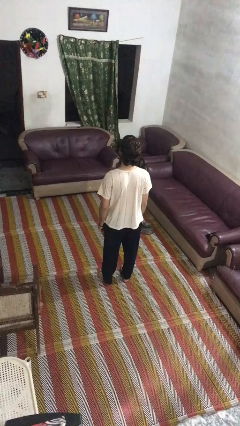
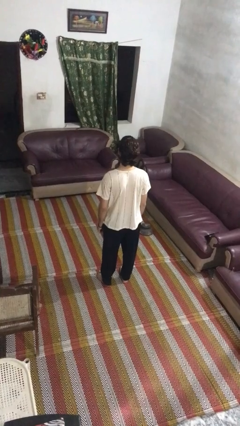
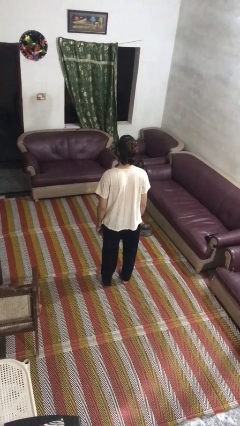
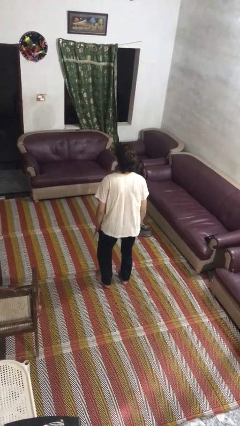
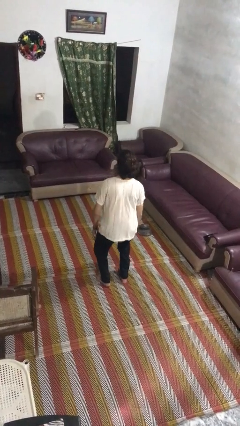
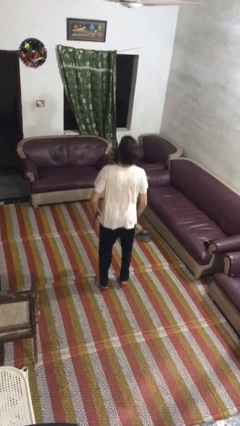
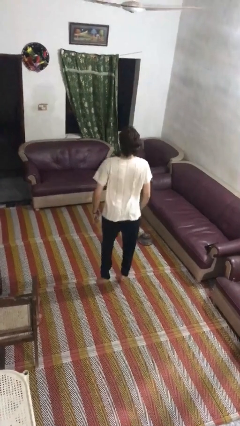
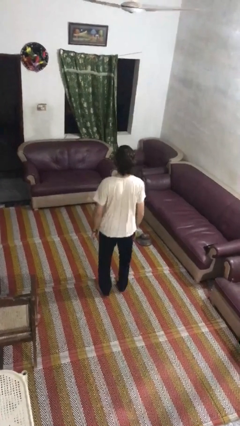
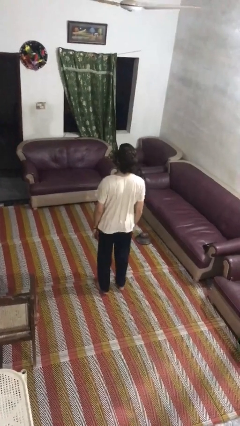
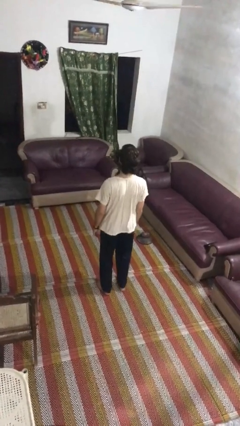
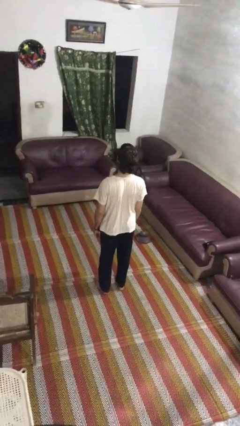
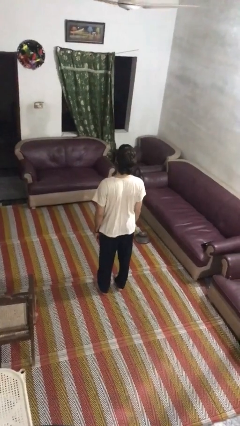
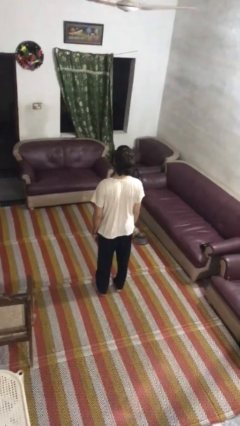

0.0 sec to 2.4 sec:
person jumps

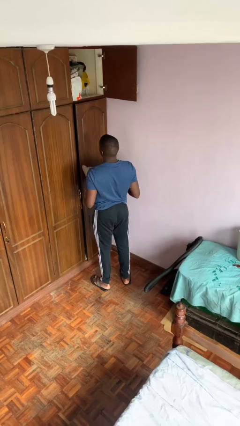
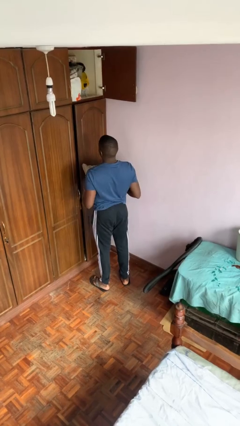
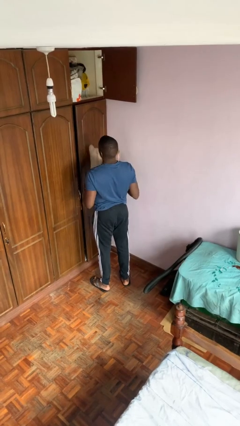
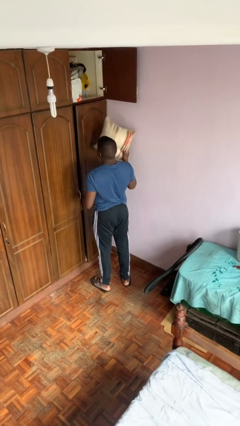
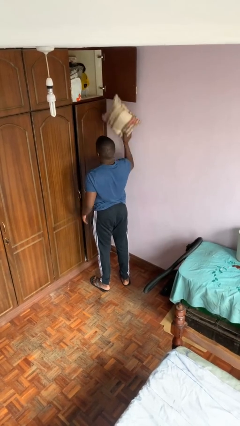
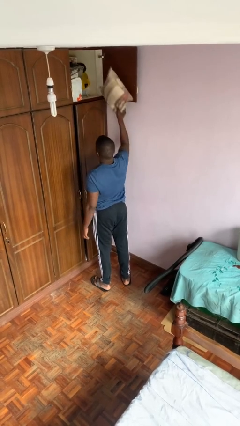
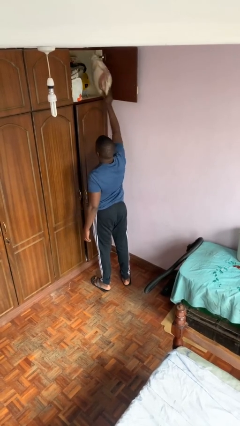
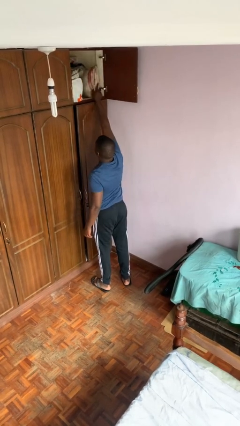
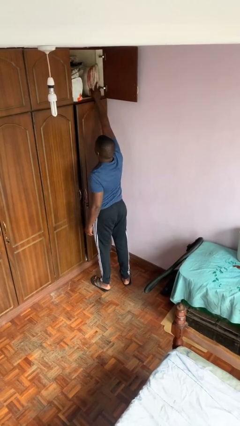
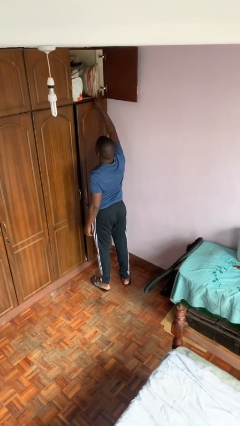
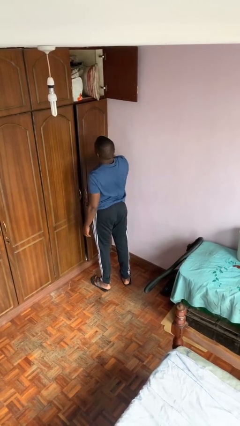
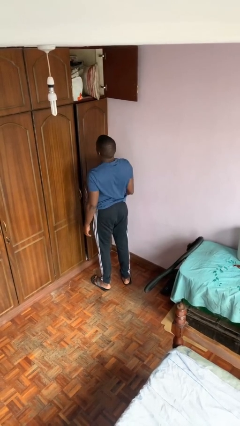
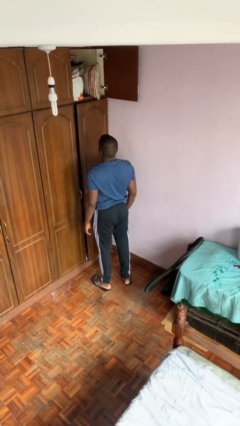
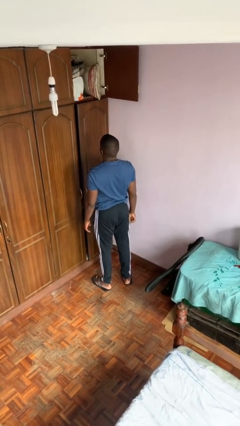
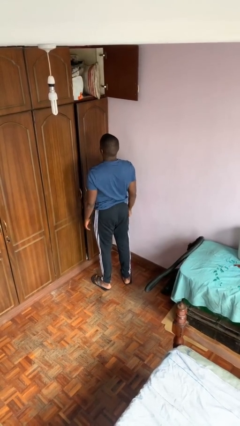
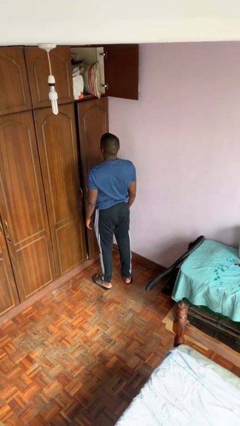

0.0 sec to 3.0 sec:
person puts down object on shelf

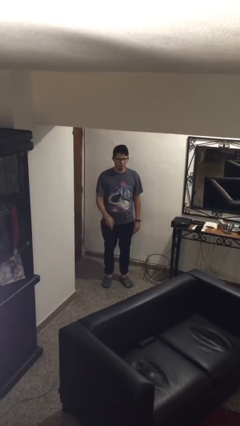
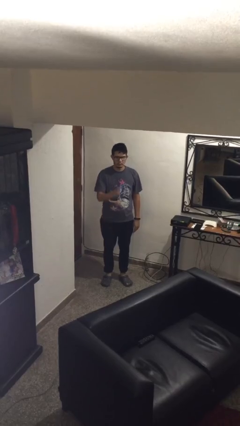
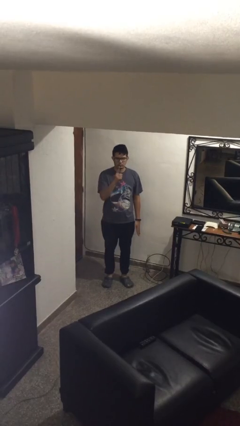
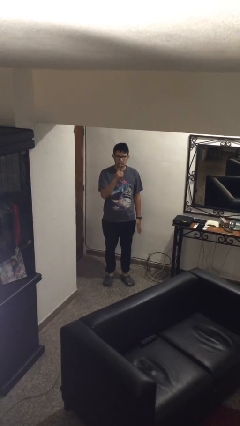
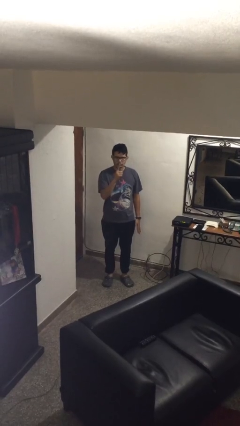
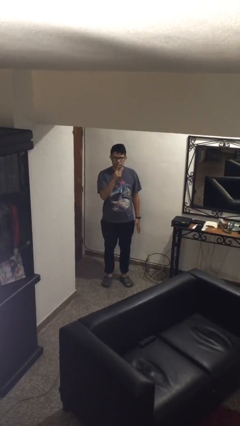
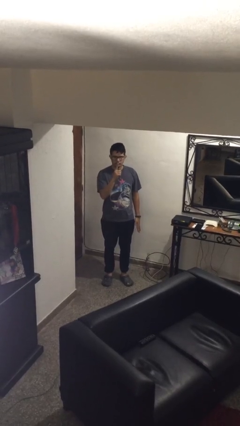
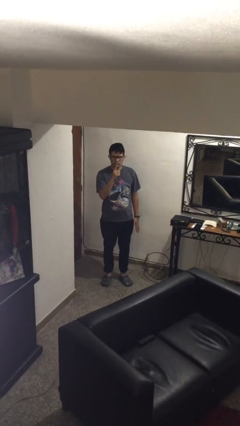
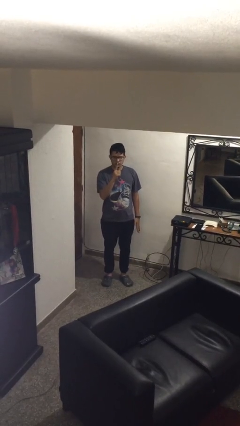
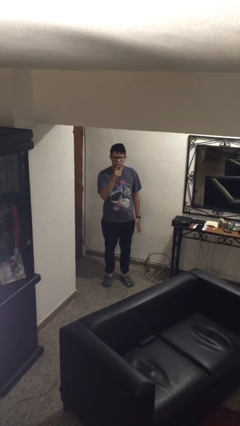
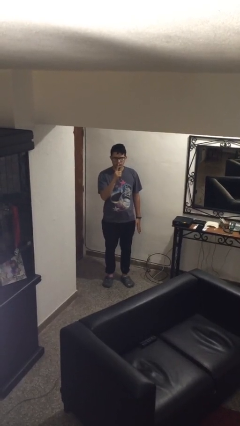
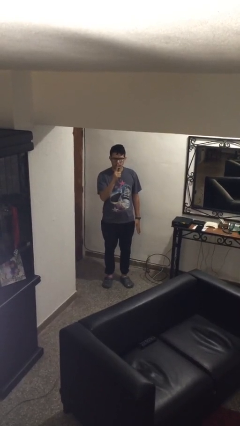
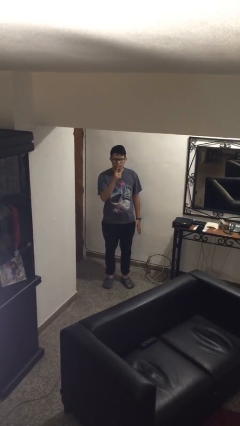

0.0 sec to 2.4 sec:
person gestures number one

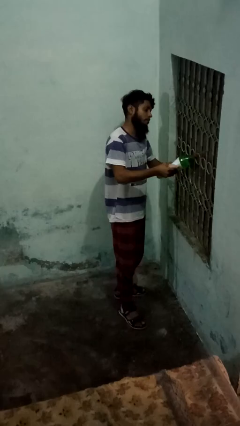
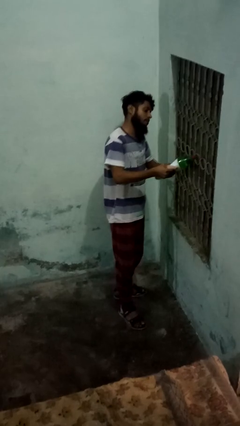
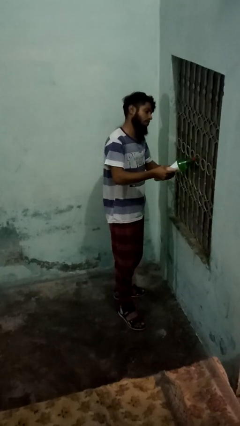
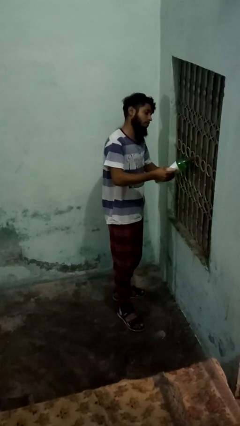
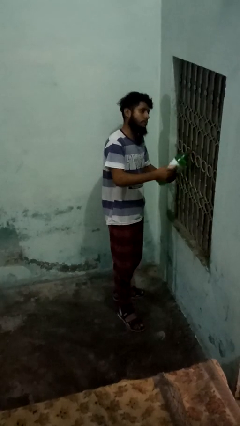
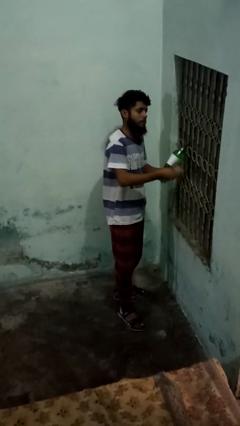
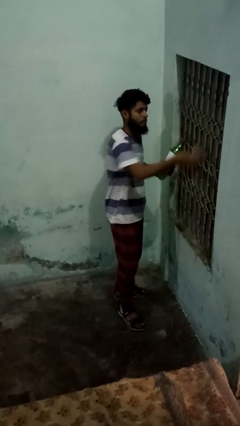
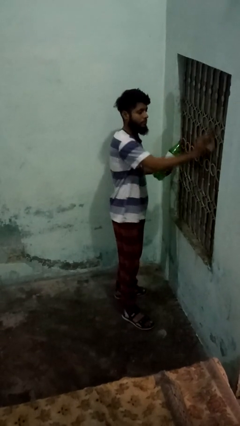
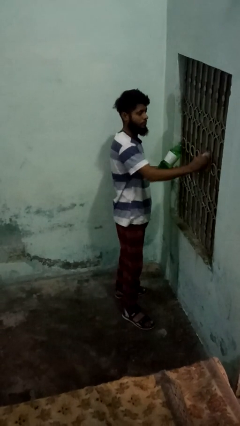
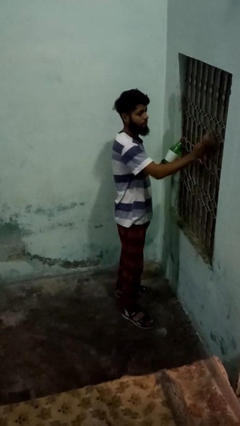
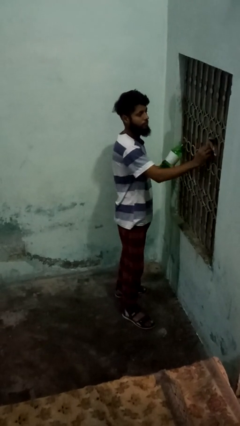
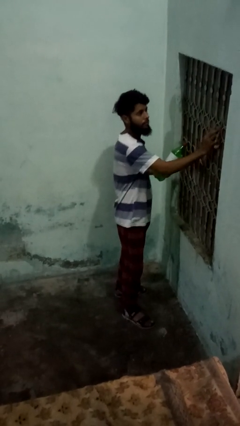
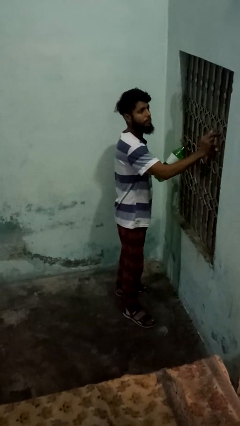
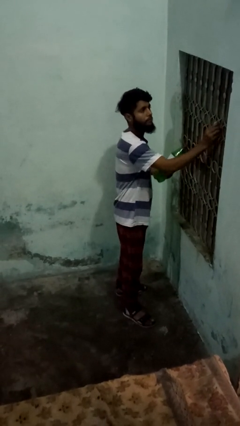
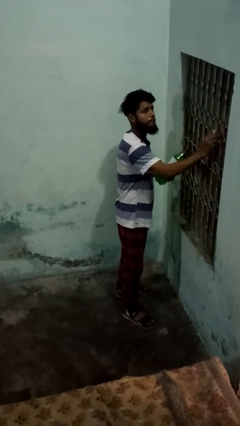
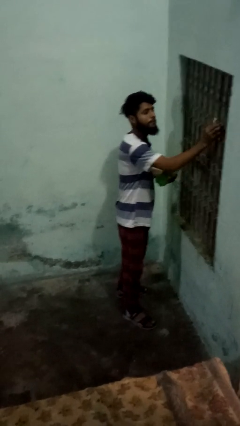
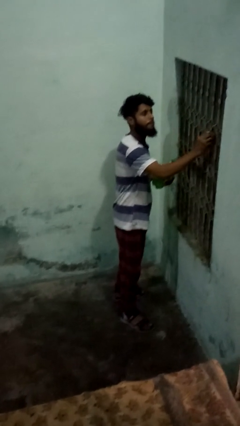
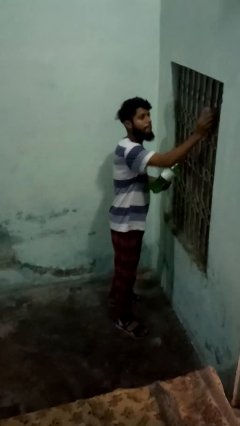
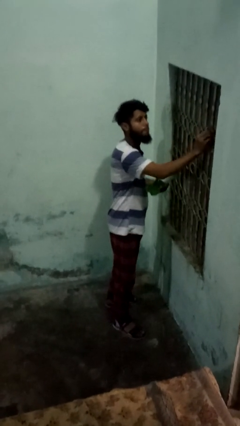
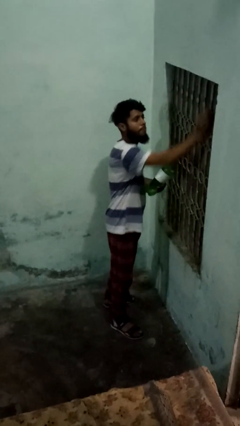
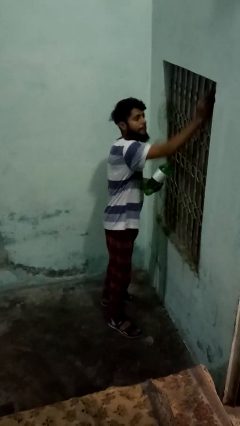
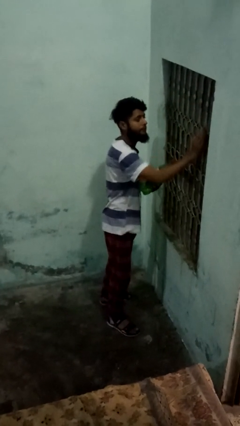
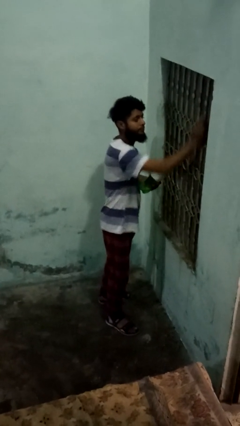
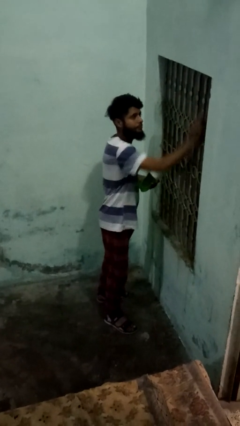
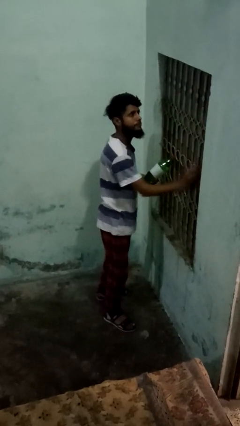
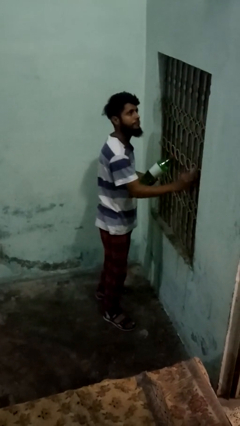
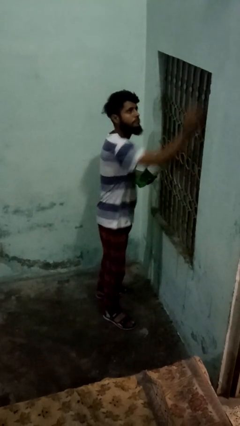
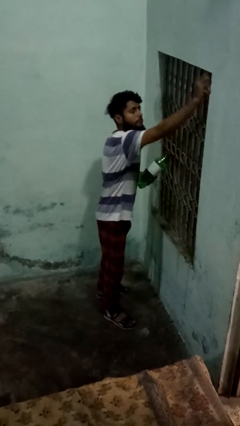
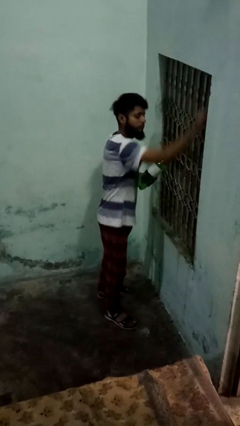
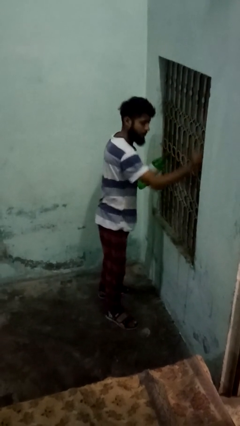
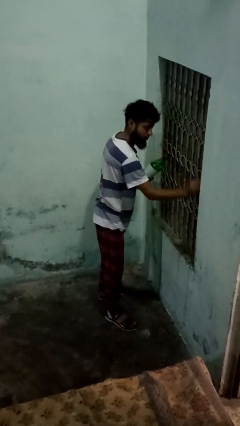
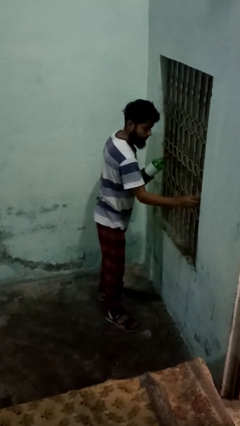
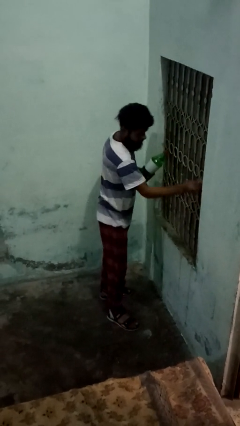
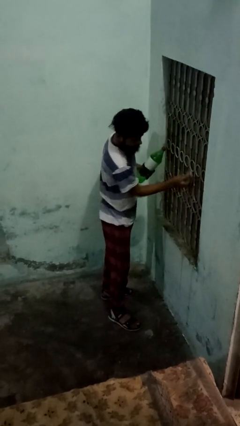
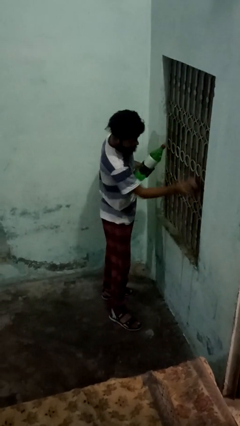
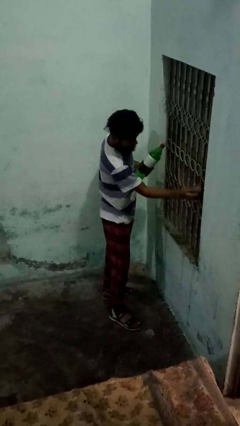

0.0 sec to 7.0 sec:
person washes window

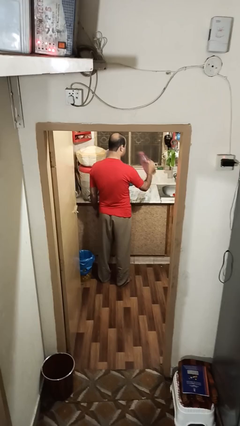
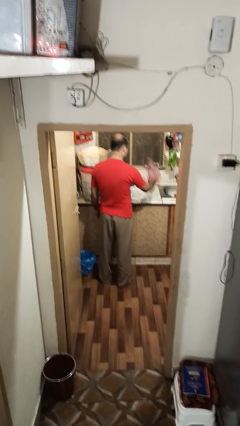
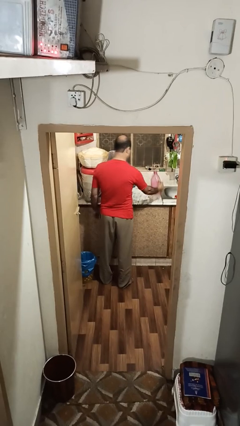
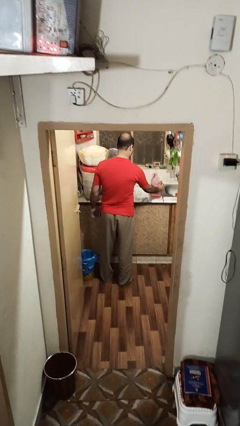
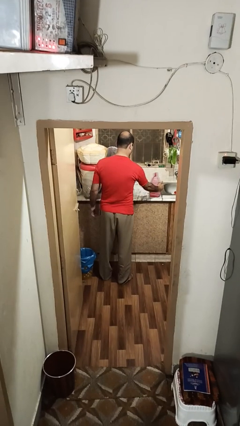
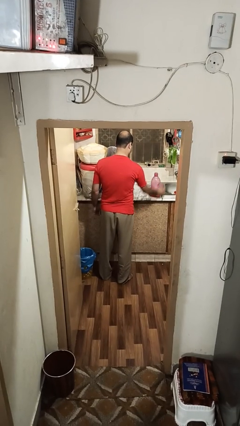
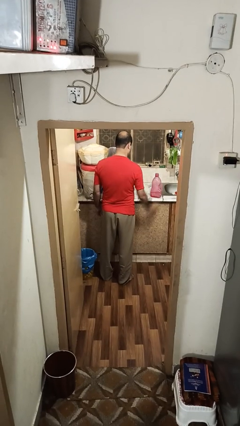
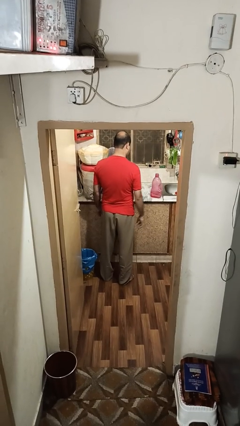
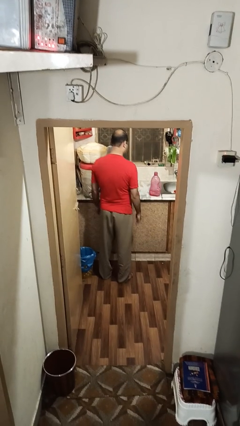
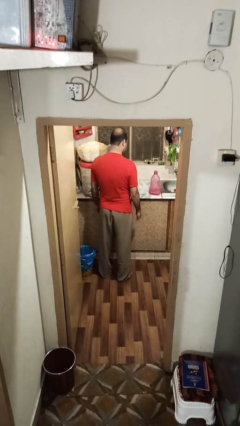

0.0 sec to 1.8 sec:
person puts down object on countertop

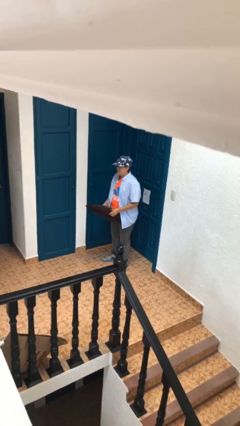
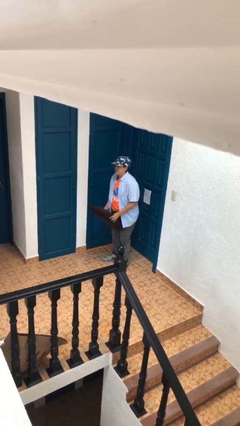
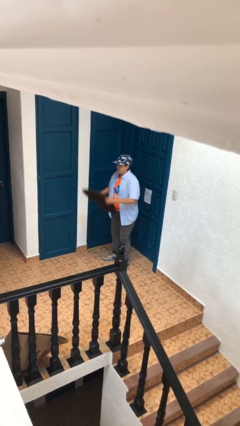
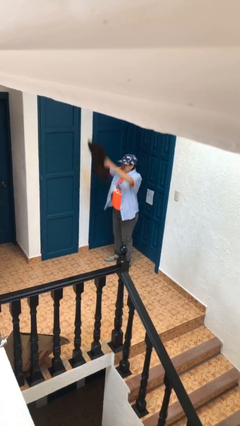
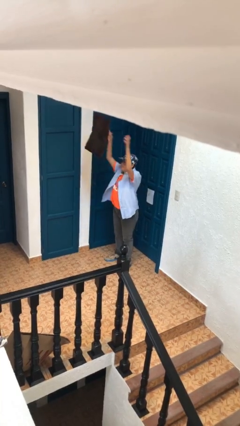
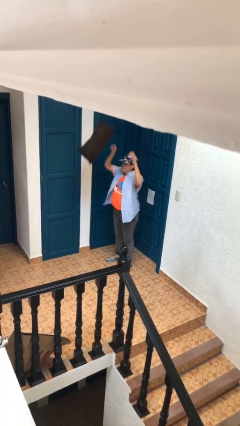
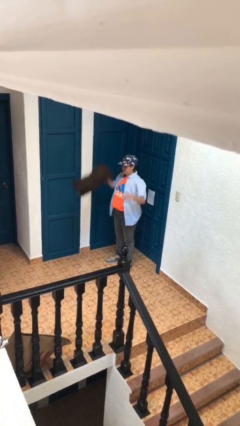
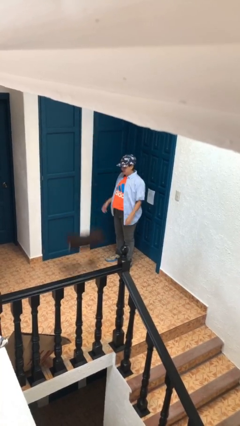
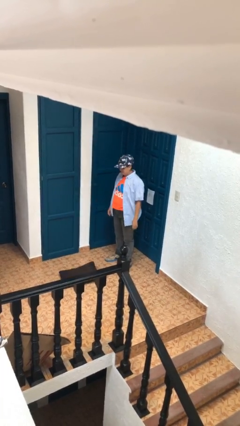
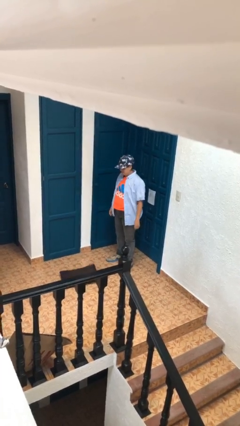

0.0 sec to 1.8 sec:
person throws object into air
